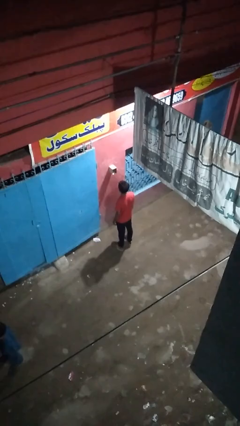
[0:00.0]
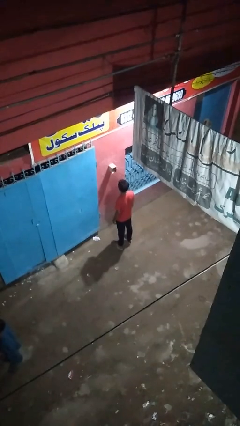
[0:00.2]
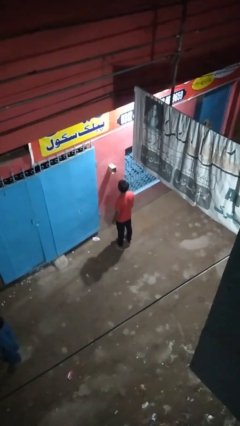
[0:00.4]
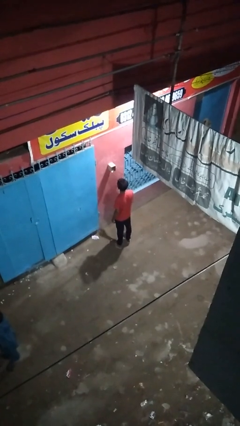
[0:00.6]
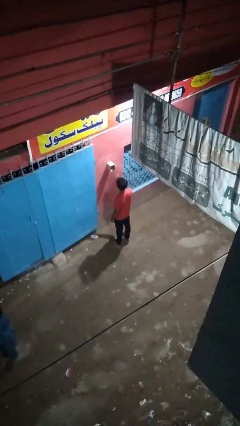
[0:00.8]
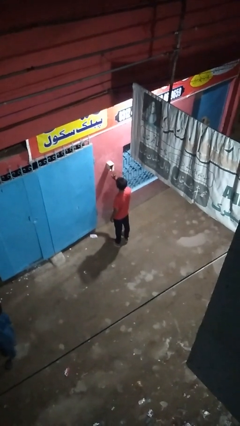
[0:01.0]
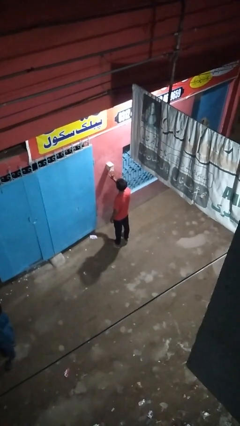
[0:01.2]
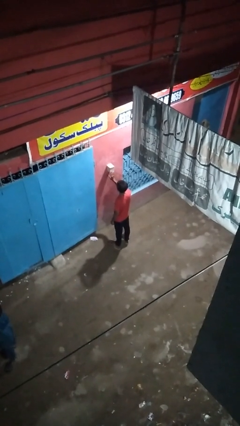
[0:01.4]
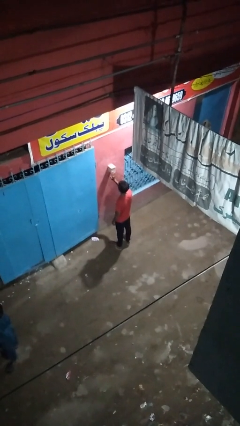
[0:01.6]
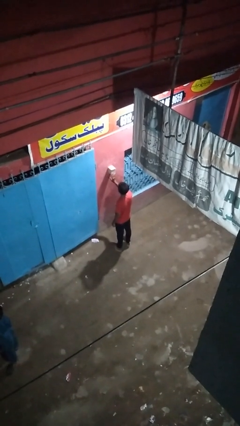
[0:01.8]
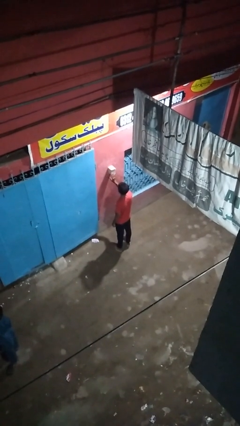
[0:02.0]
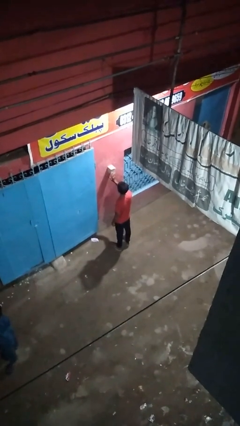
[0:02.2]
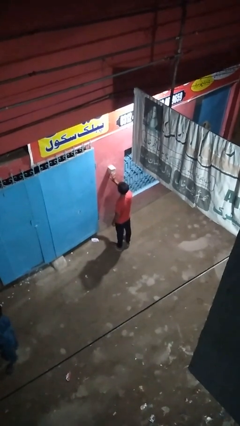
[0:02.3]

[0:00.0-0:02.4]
person closes mailbox

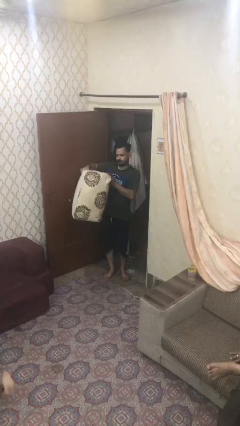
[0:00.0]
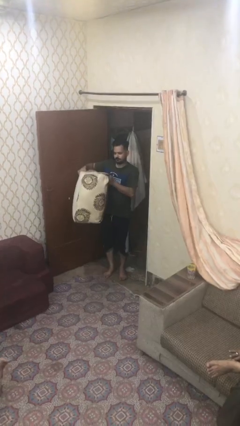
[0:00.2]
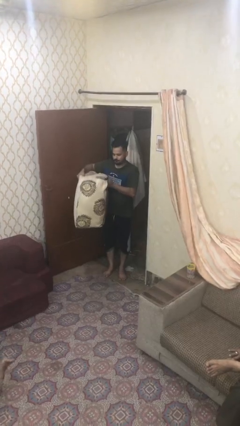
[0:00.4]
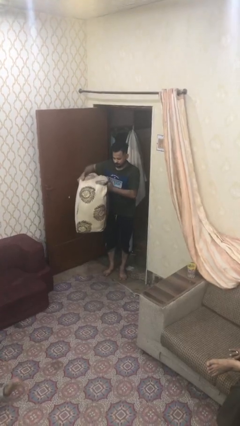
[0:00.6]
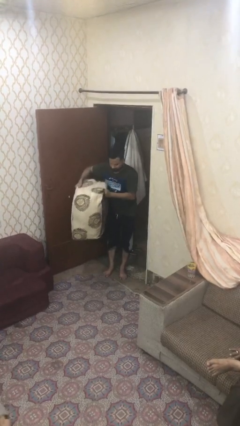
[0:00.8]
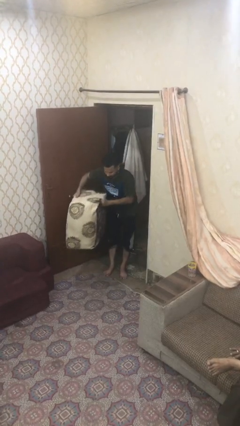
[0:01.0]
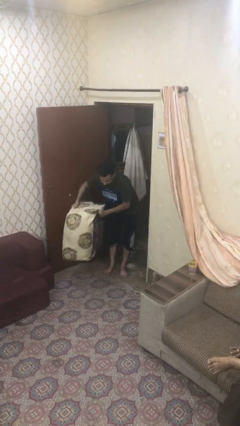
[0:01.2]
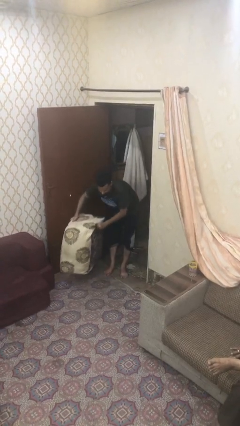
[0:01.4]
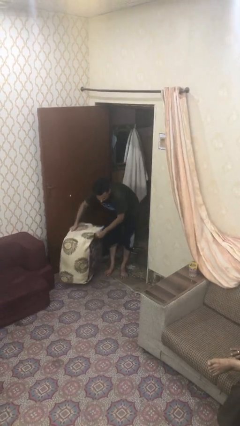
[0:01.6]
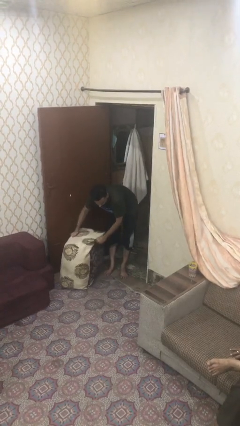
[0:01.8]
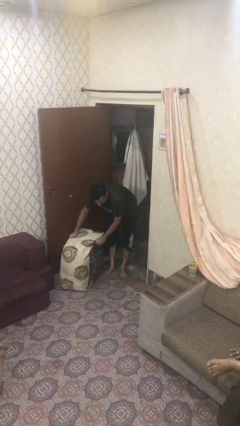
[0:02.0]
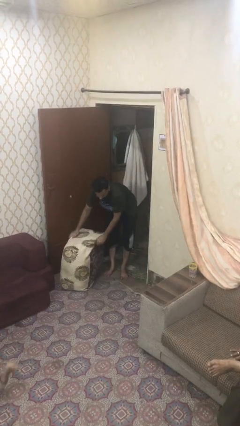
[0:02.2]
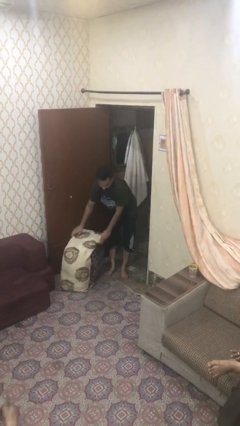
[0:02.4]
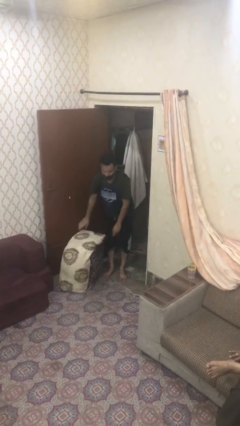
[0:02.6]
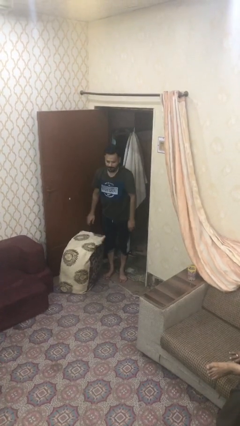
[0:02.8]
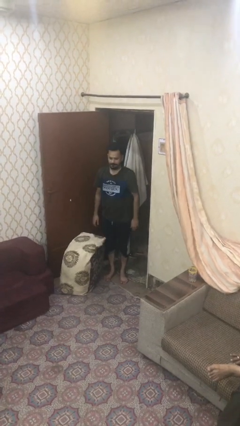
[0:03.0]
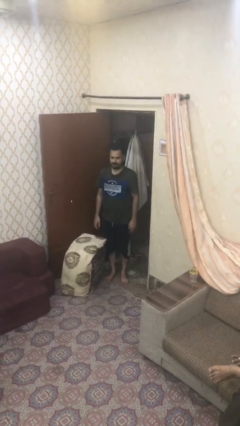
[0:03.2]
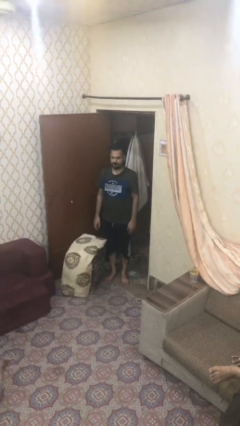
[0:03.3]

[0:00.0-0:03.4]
person puts down object on floor

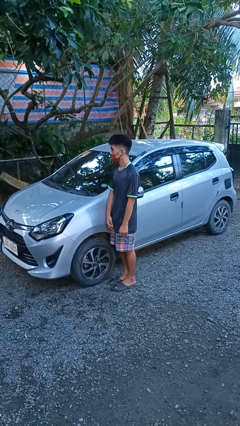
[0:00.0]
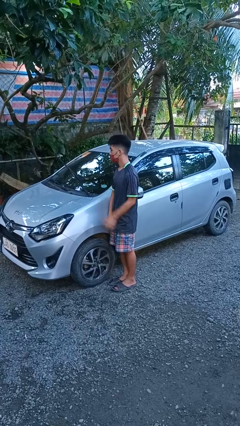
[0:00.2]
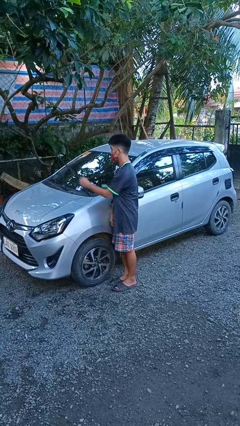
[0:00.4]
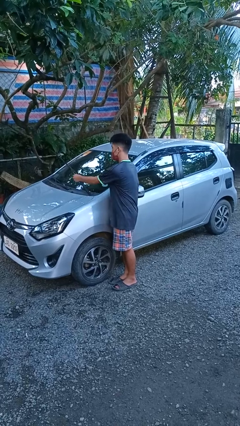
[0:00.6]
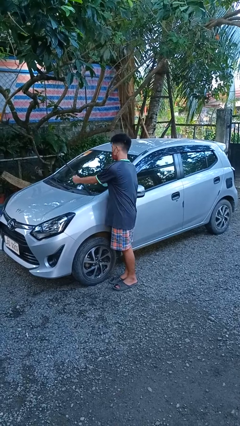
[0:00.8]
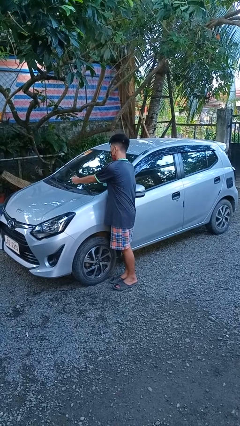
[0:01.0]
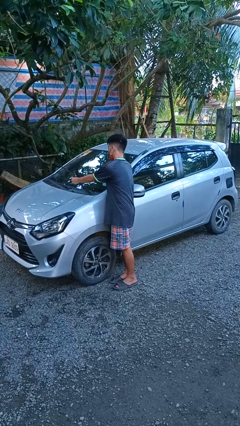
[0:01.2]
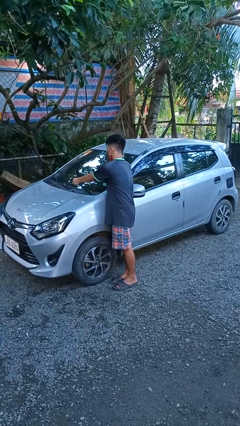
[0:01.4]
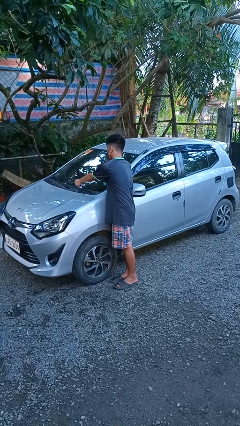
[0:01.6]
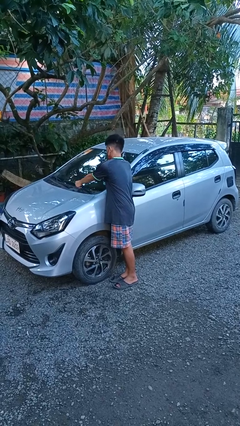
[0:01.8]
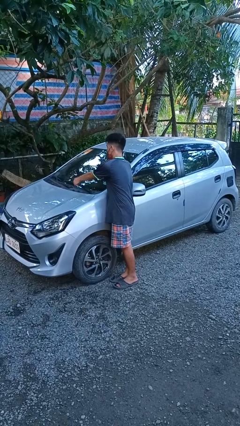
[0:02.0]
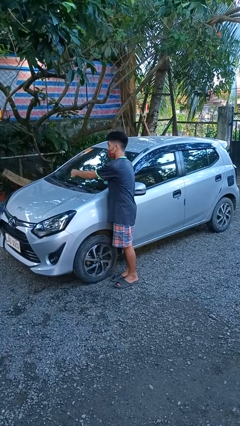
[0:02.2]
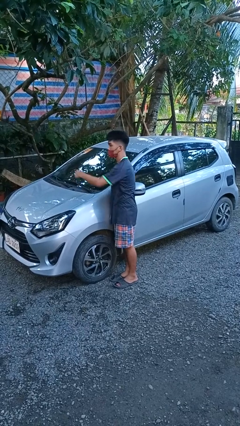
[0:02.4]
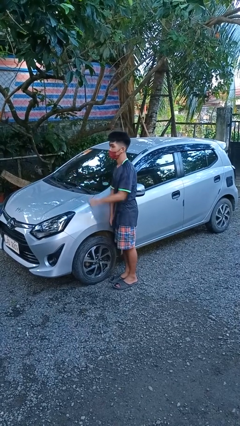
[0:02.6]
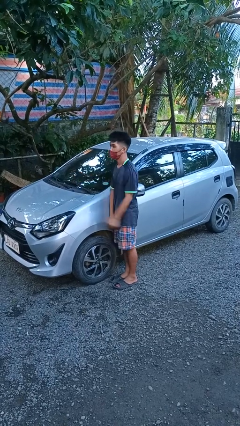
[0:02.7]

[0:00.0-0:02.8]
person flips down car wipers

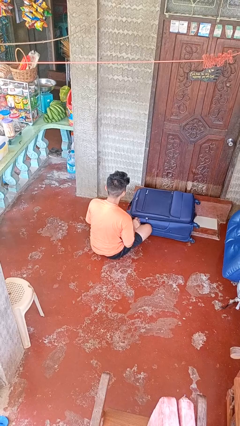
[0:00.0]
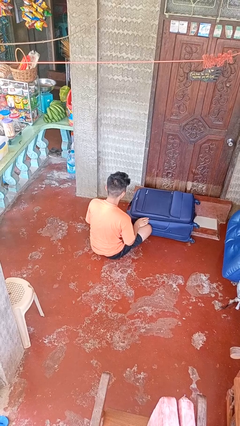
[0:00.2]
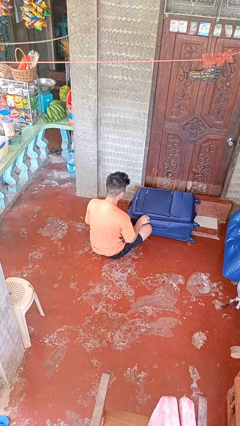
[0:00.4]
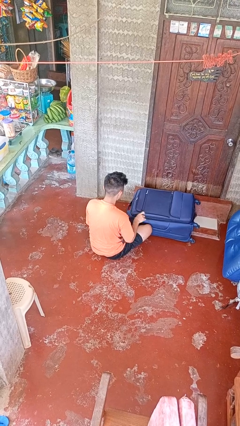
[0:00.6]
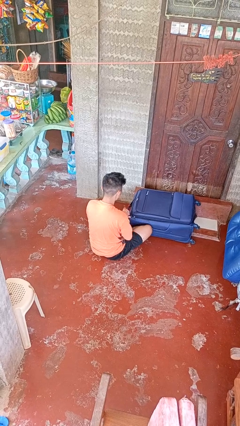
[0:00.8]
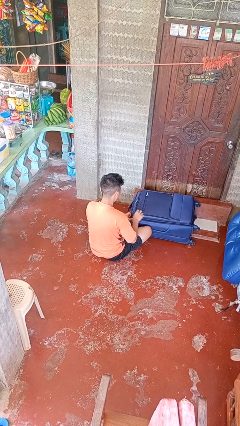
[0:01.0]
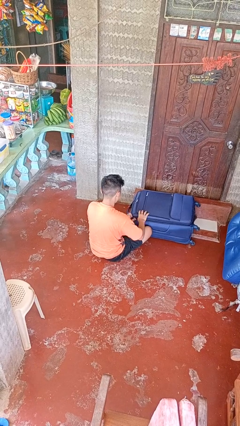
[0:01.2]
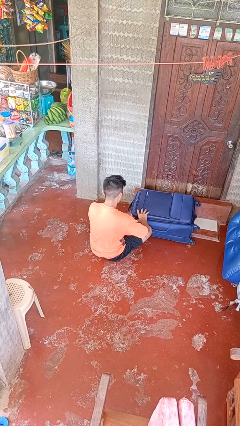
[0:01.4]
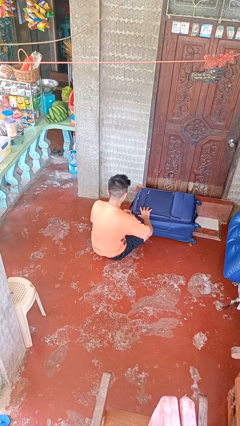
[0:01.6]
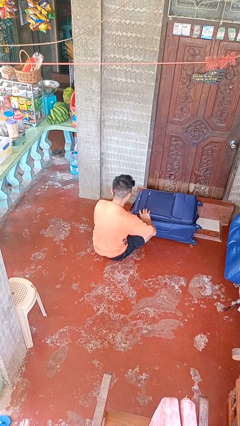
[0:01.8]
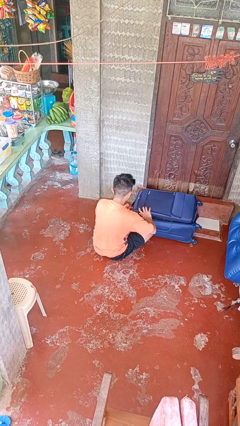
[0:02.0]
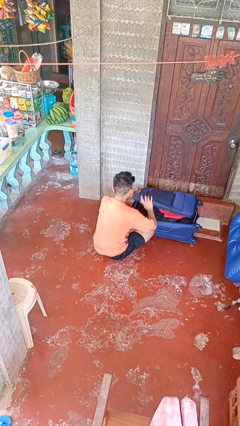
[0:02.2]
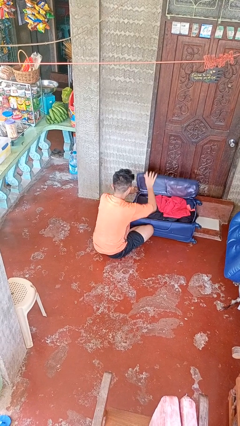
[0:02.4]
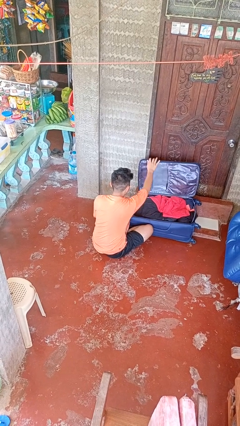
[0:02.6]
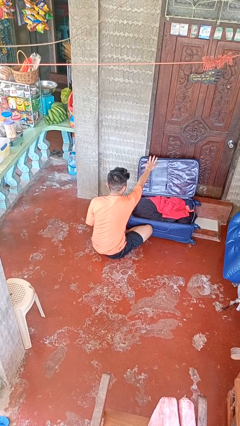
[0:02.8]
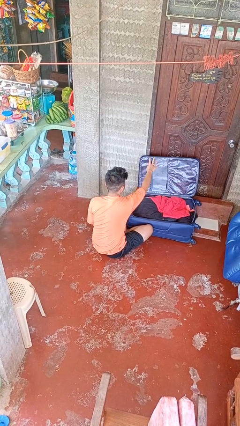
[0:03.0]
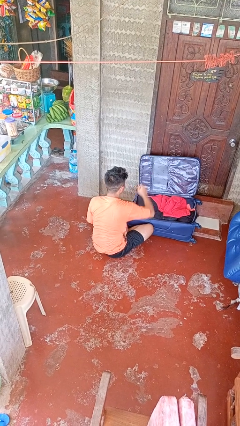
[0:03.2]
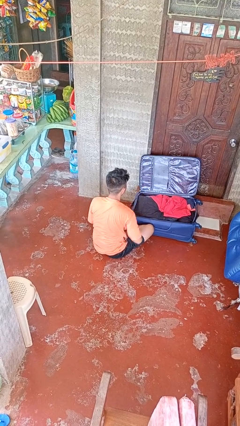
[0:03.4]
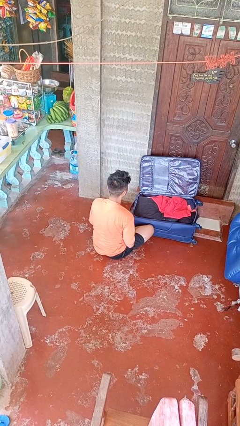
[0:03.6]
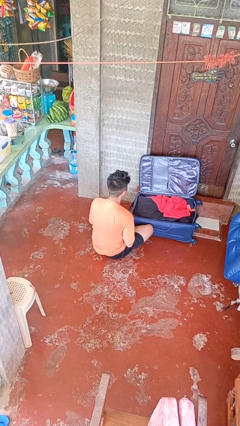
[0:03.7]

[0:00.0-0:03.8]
person opens suitcase

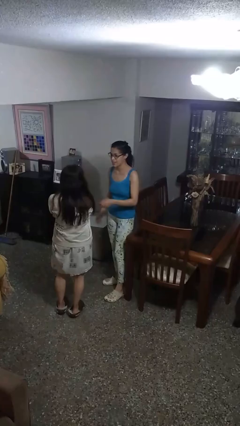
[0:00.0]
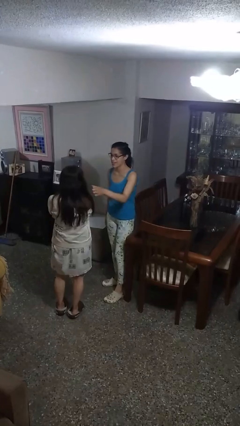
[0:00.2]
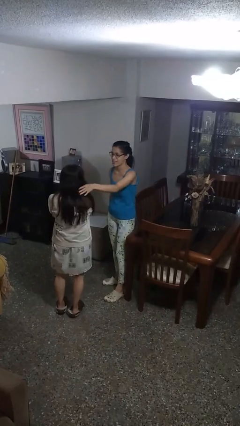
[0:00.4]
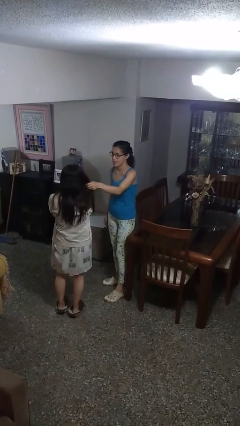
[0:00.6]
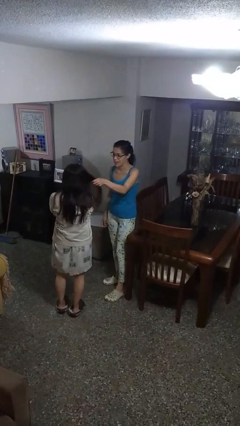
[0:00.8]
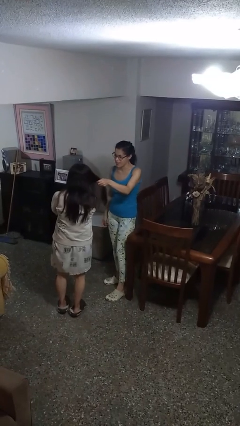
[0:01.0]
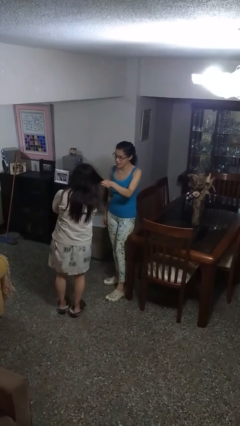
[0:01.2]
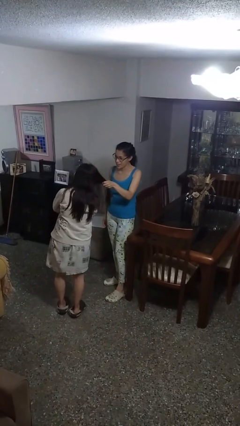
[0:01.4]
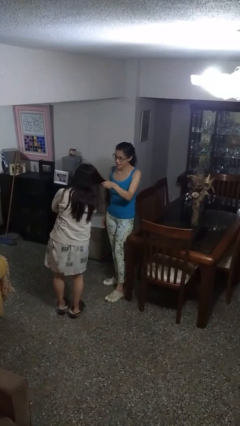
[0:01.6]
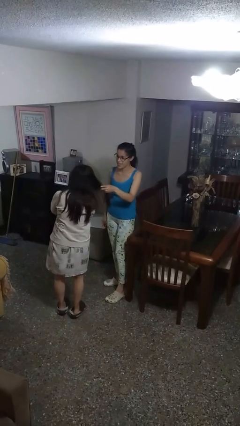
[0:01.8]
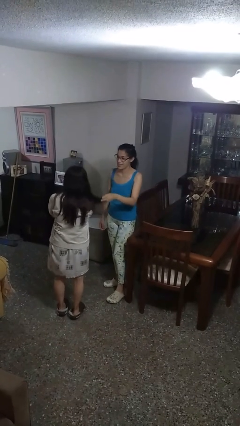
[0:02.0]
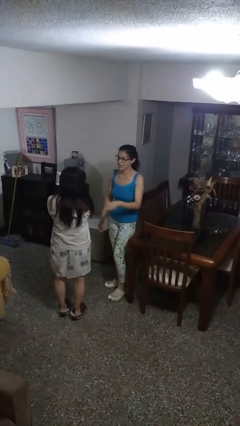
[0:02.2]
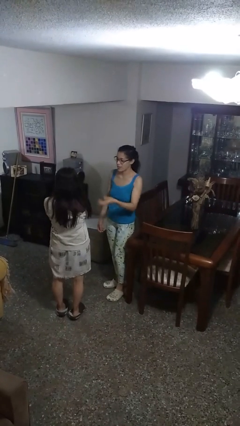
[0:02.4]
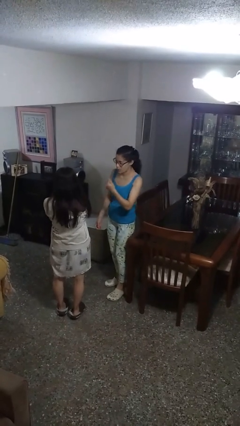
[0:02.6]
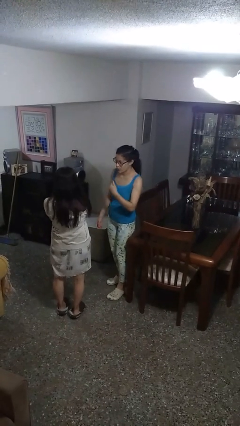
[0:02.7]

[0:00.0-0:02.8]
person grabs person by hair

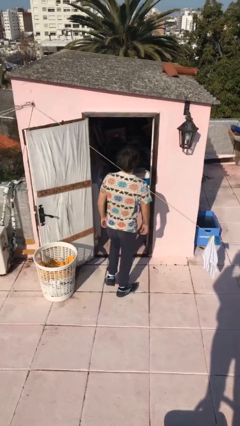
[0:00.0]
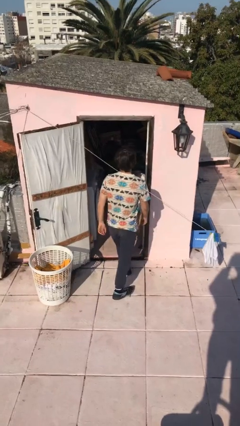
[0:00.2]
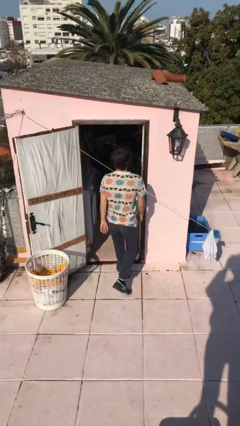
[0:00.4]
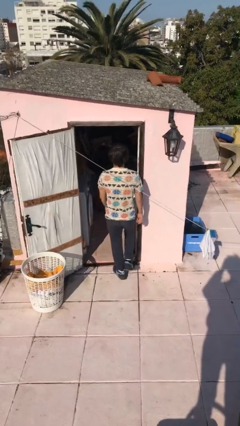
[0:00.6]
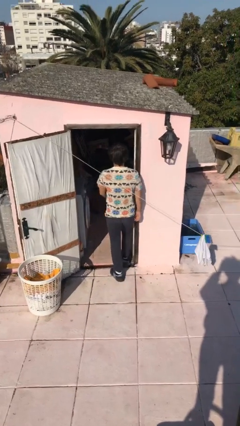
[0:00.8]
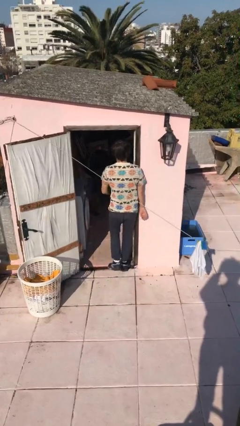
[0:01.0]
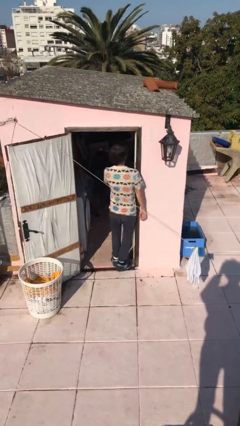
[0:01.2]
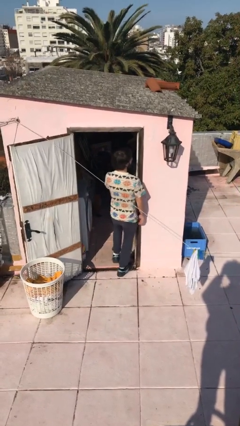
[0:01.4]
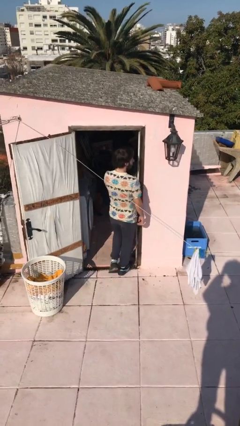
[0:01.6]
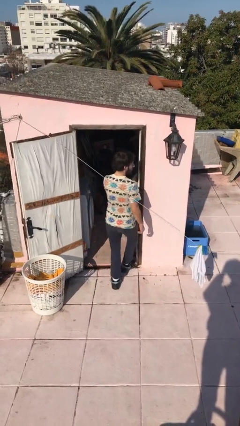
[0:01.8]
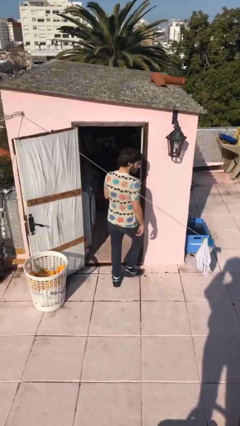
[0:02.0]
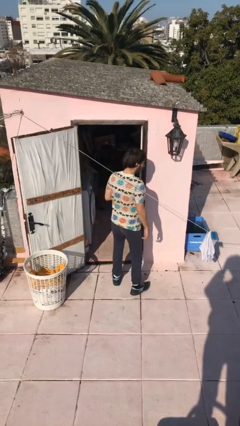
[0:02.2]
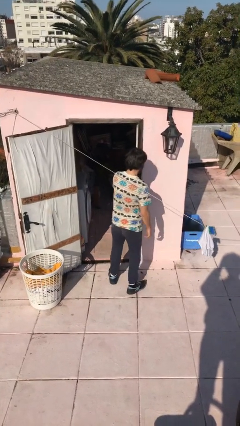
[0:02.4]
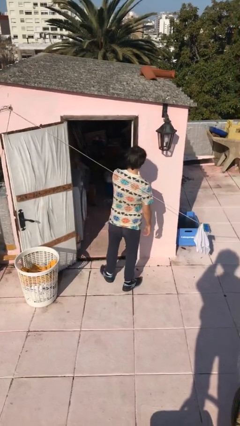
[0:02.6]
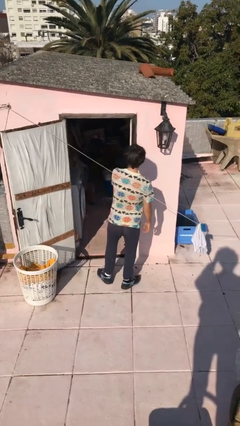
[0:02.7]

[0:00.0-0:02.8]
person bumps into wall
